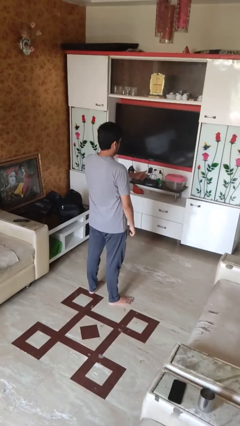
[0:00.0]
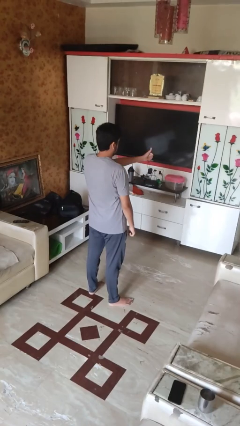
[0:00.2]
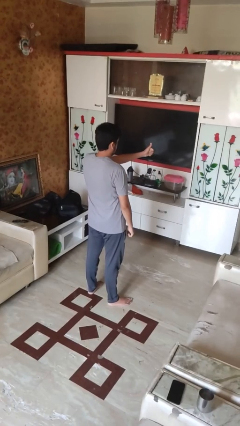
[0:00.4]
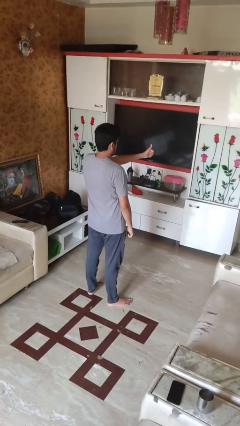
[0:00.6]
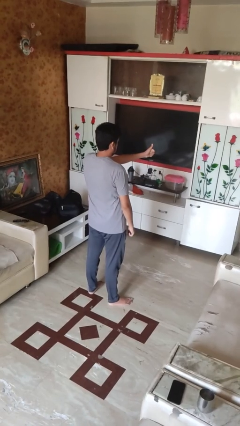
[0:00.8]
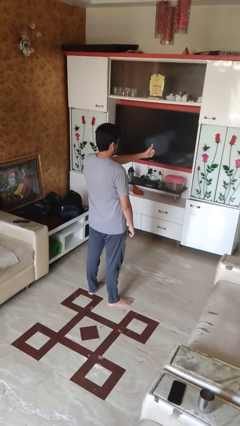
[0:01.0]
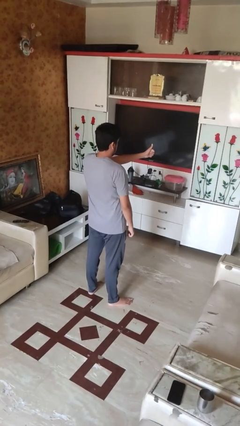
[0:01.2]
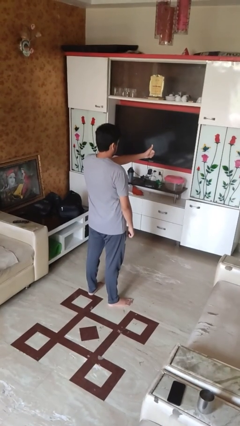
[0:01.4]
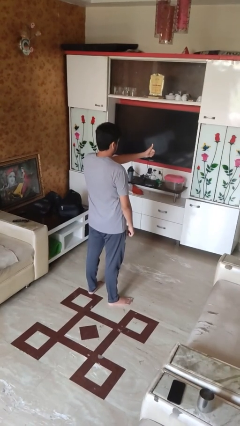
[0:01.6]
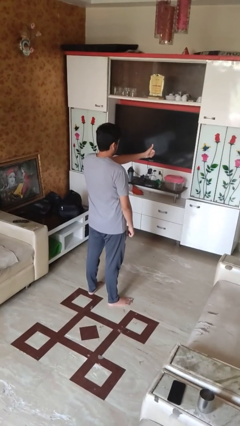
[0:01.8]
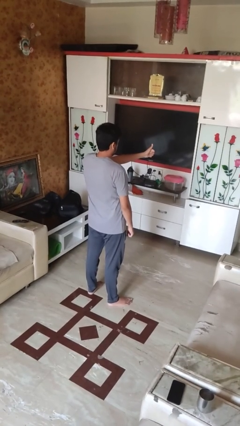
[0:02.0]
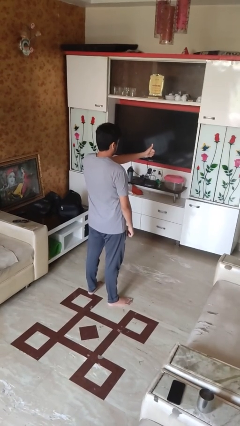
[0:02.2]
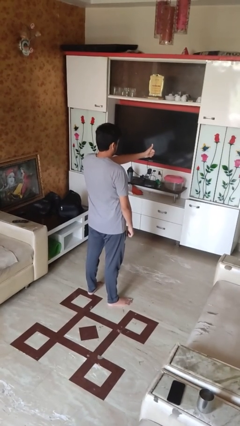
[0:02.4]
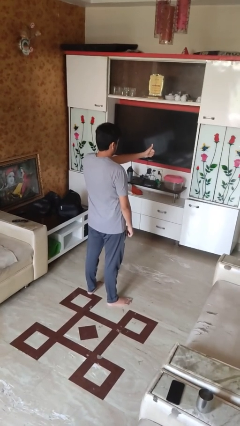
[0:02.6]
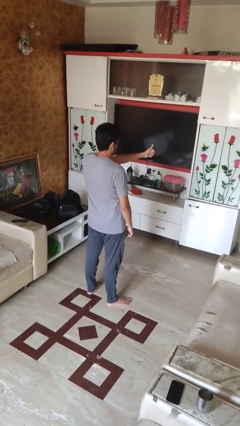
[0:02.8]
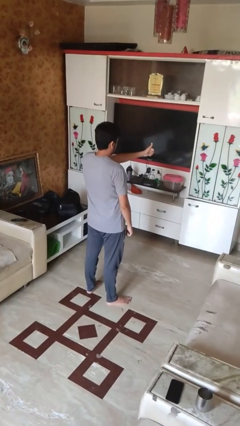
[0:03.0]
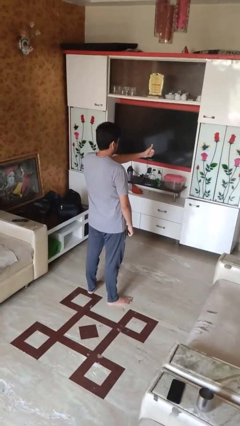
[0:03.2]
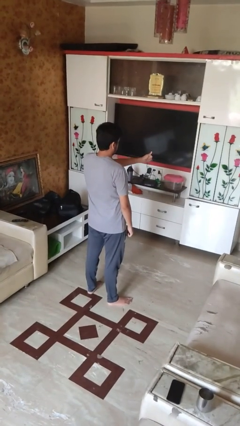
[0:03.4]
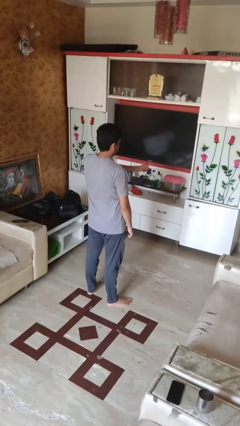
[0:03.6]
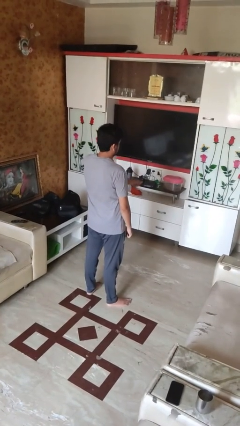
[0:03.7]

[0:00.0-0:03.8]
person gestures thumbs up

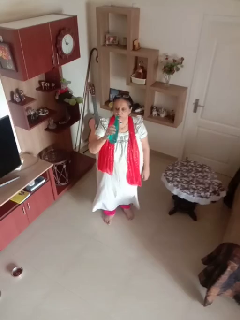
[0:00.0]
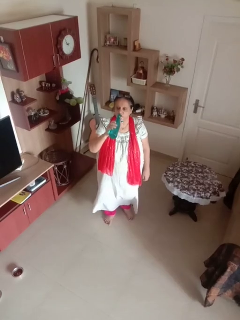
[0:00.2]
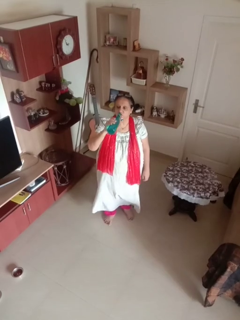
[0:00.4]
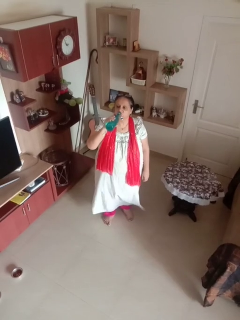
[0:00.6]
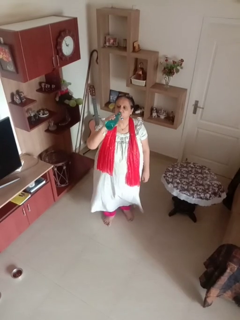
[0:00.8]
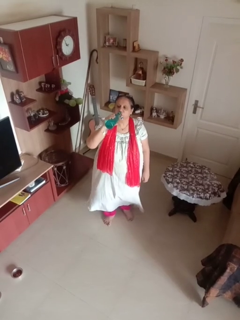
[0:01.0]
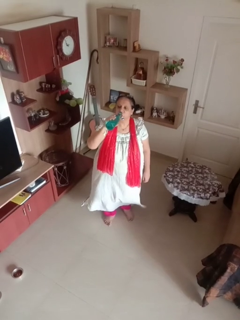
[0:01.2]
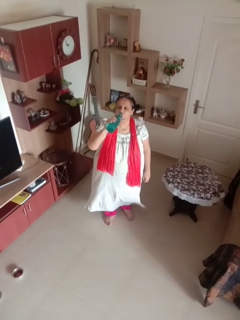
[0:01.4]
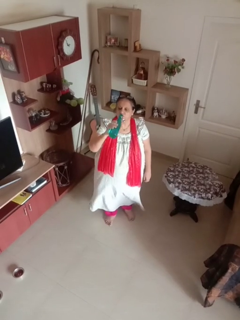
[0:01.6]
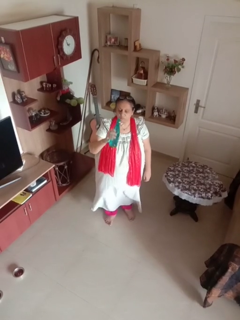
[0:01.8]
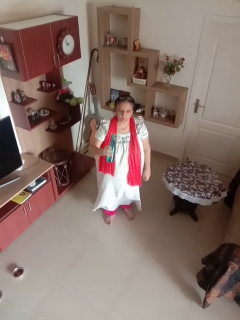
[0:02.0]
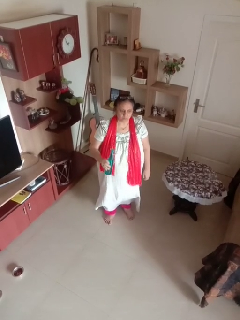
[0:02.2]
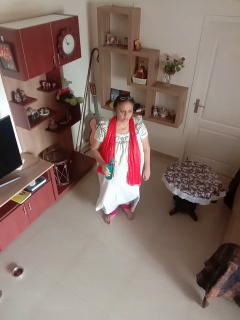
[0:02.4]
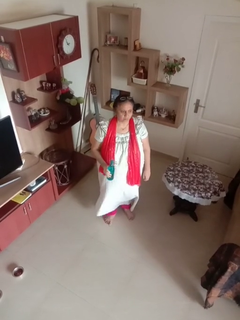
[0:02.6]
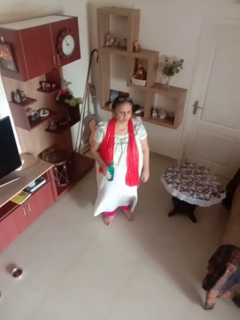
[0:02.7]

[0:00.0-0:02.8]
person drinks from bottle

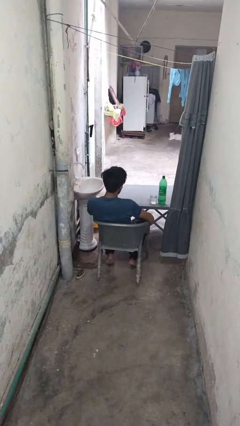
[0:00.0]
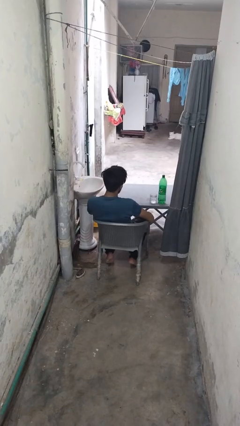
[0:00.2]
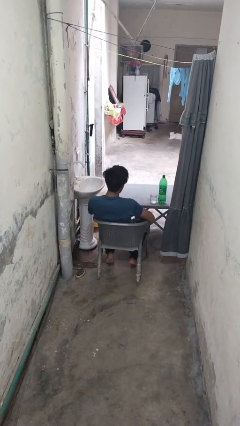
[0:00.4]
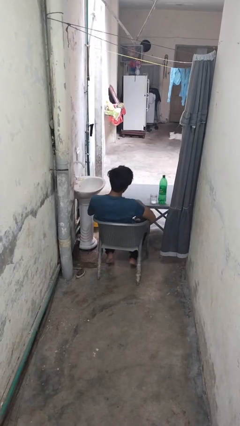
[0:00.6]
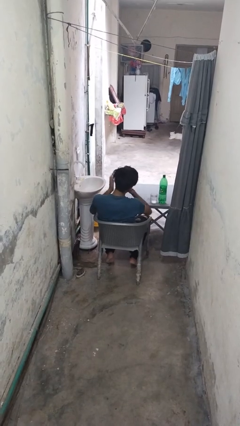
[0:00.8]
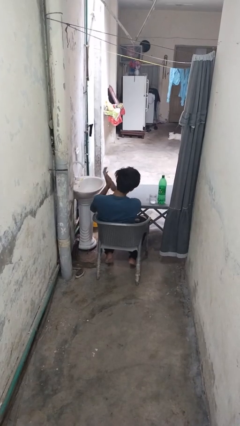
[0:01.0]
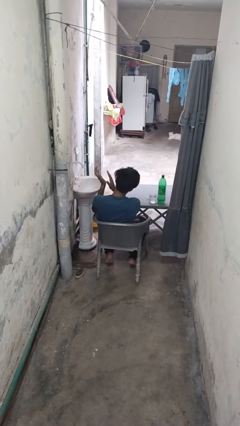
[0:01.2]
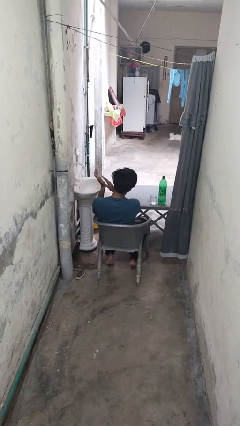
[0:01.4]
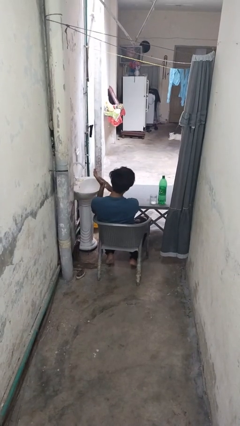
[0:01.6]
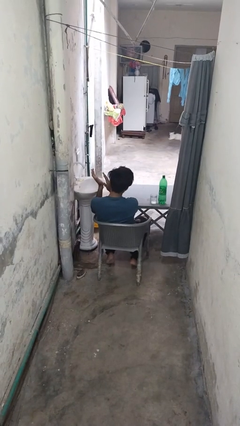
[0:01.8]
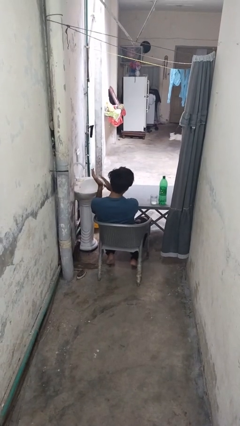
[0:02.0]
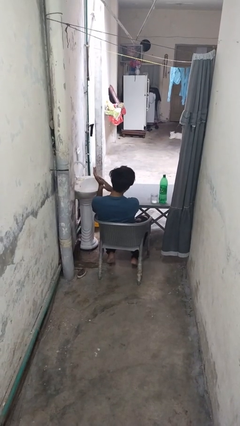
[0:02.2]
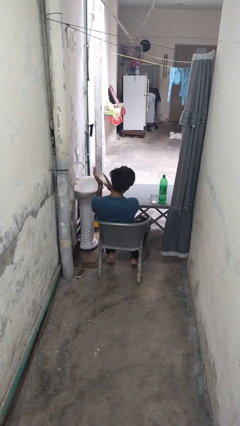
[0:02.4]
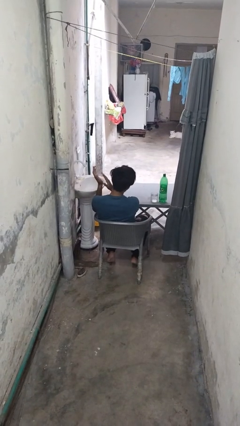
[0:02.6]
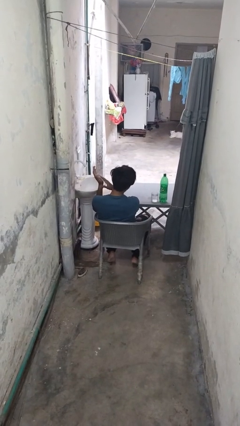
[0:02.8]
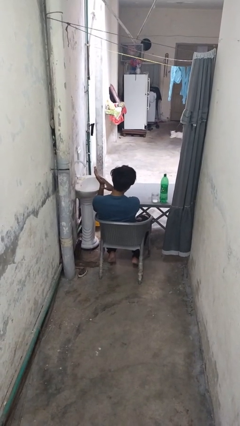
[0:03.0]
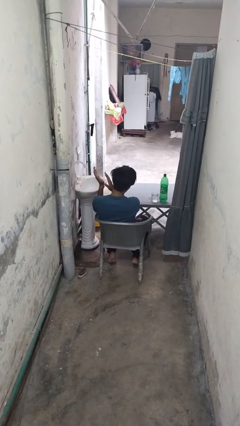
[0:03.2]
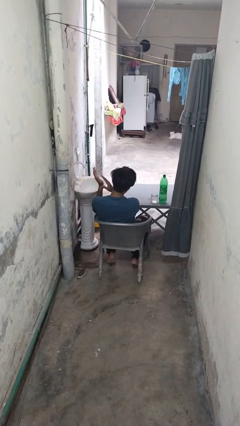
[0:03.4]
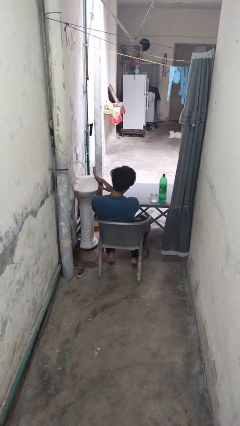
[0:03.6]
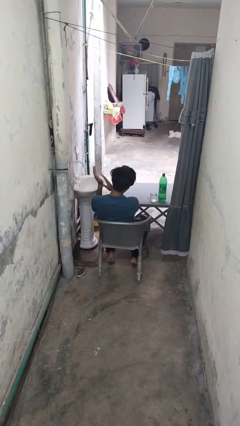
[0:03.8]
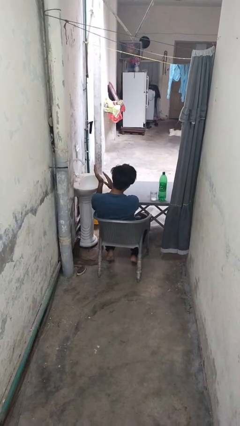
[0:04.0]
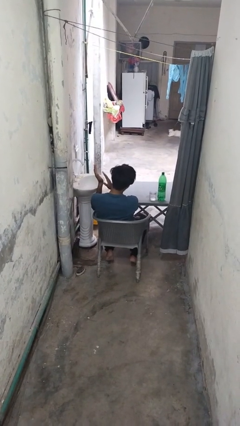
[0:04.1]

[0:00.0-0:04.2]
person claps hands

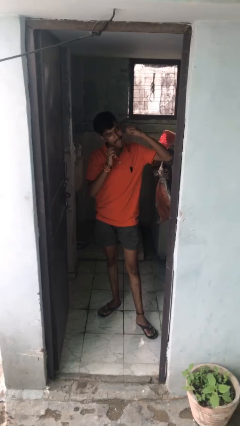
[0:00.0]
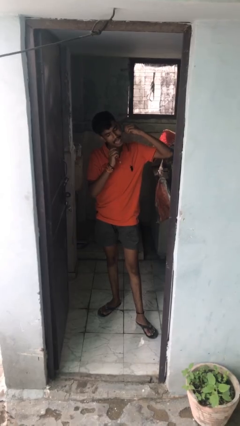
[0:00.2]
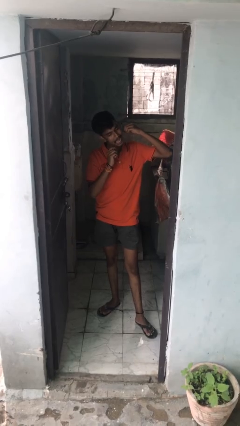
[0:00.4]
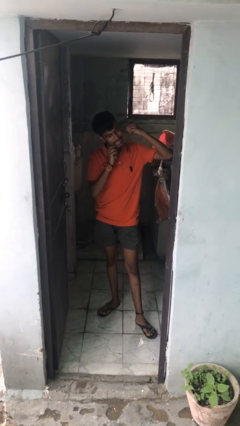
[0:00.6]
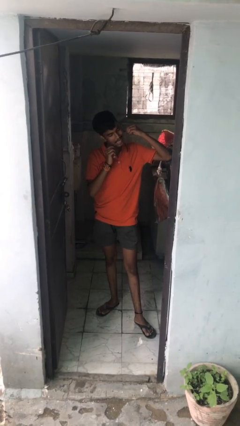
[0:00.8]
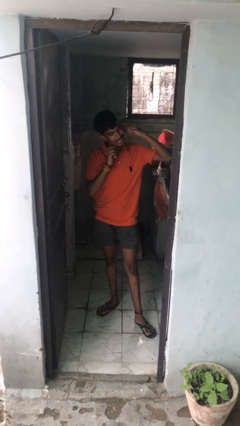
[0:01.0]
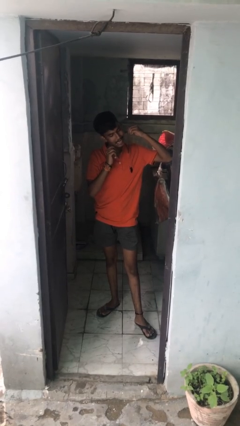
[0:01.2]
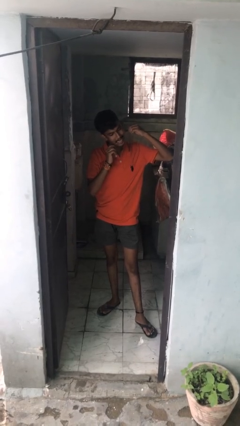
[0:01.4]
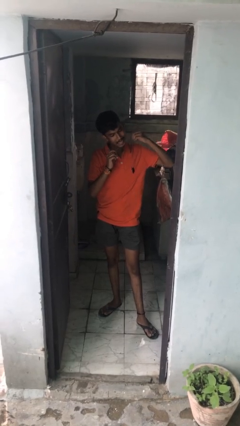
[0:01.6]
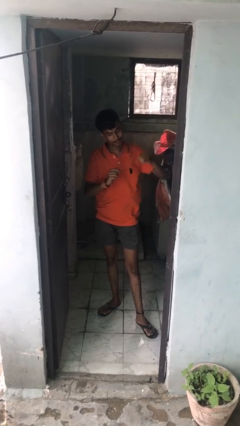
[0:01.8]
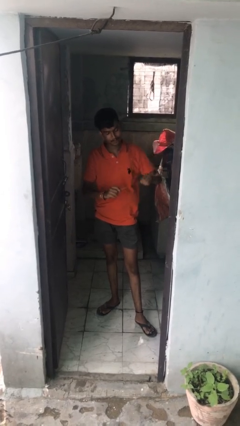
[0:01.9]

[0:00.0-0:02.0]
person flosses

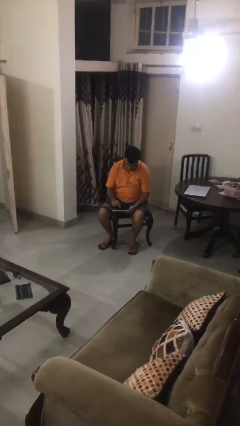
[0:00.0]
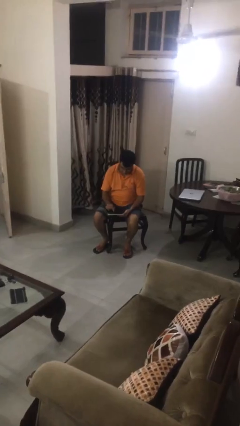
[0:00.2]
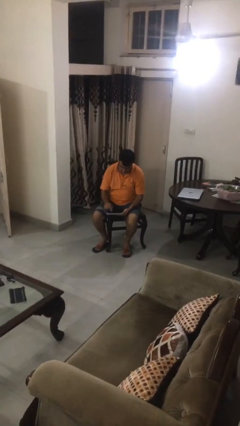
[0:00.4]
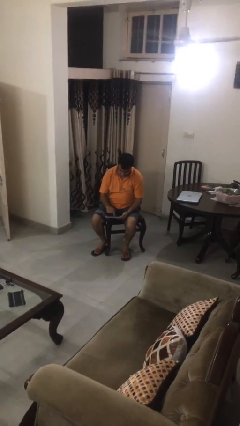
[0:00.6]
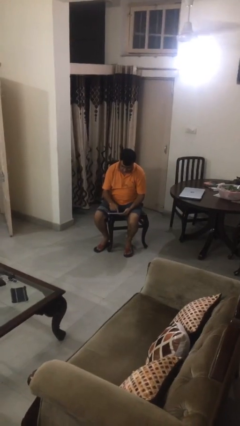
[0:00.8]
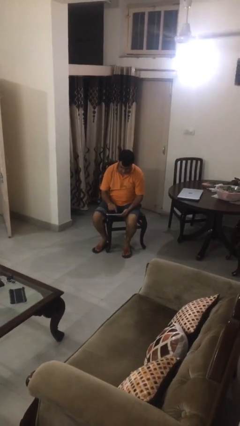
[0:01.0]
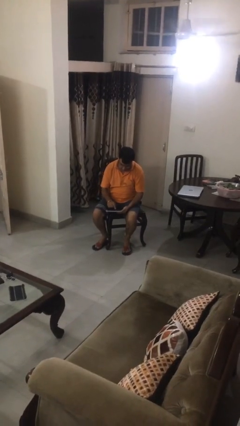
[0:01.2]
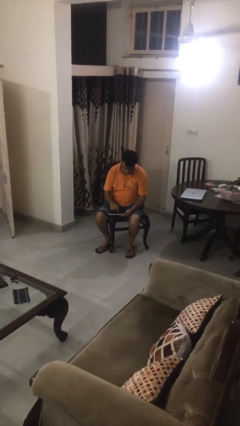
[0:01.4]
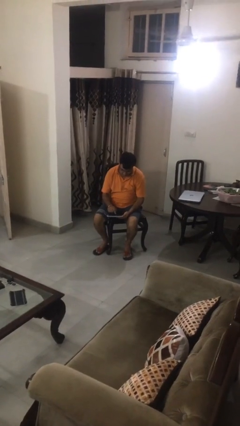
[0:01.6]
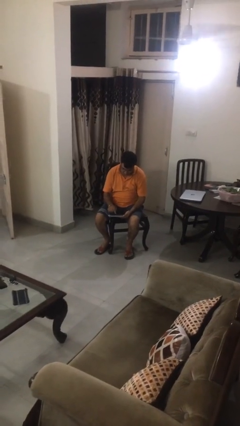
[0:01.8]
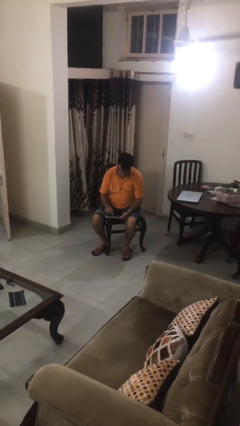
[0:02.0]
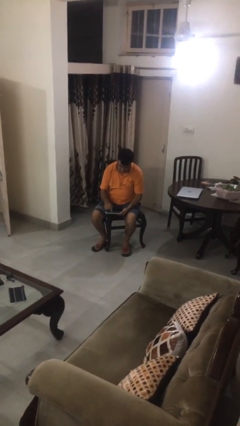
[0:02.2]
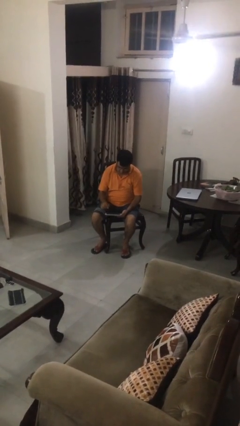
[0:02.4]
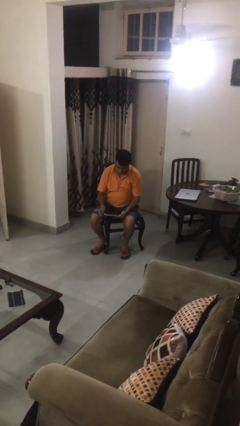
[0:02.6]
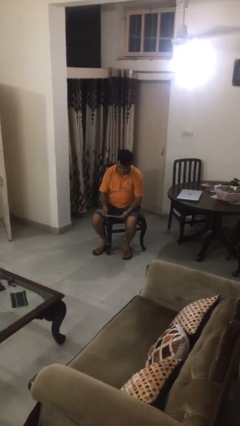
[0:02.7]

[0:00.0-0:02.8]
person interacts with tablet

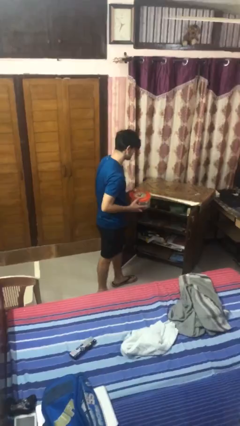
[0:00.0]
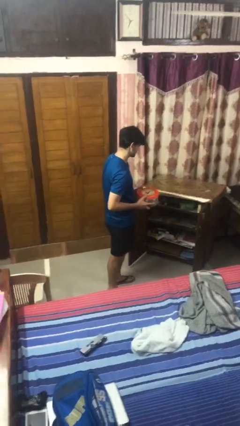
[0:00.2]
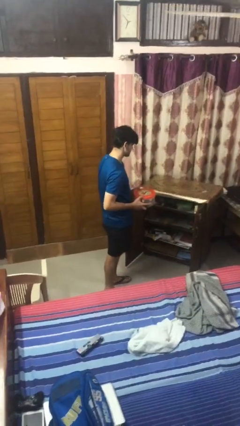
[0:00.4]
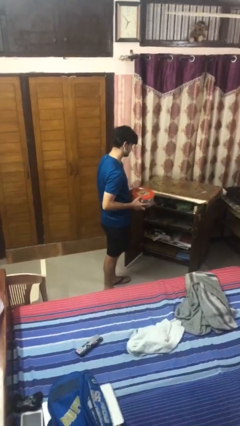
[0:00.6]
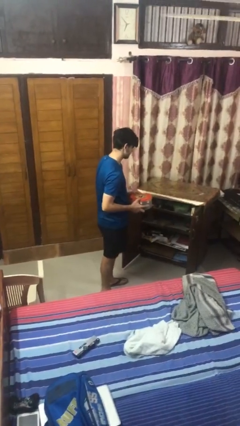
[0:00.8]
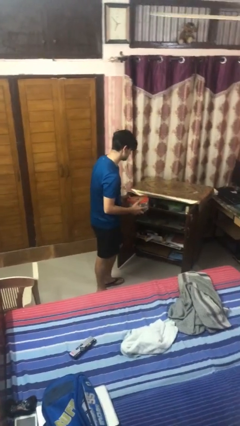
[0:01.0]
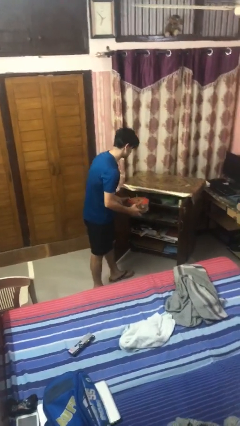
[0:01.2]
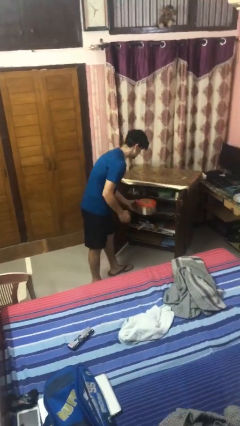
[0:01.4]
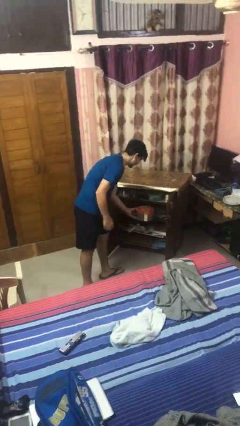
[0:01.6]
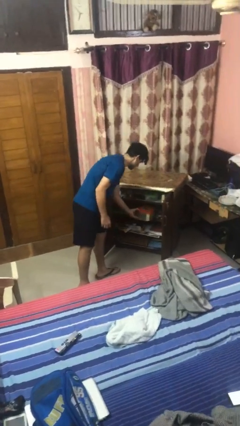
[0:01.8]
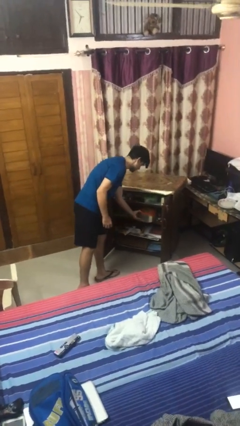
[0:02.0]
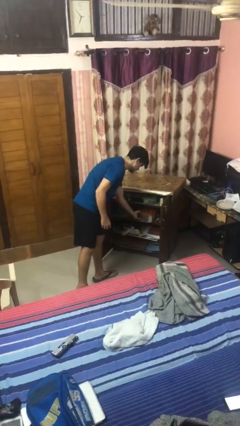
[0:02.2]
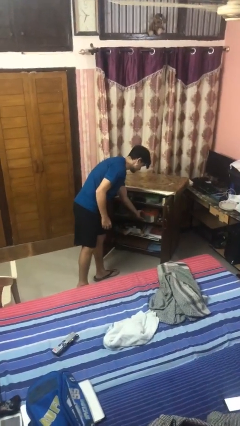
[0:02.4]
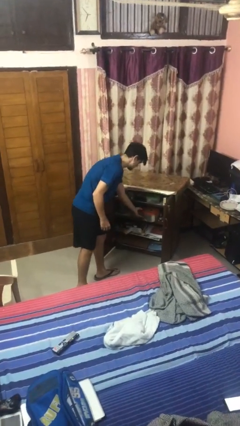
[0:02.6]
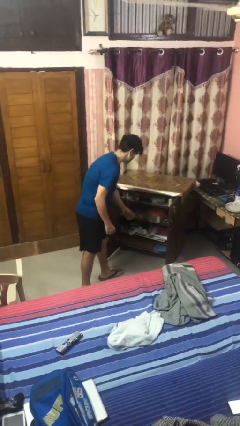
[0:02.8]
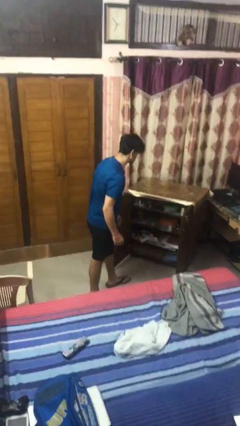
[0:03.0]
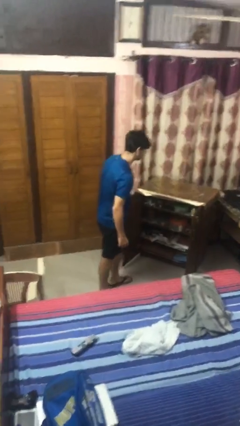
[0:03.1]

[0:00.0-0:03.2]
person puts down object into cabinet
